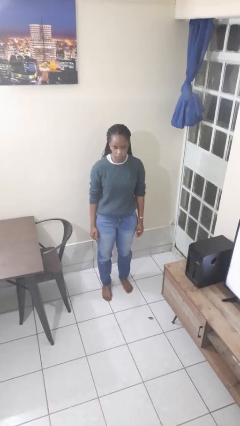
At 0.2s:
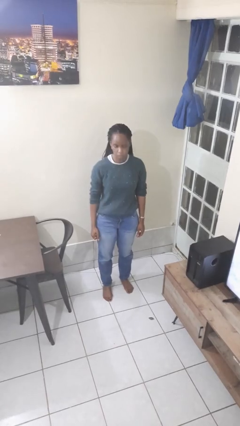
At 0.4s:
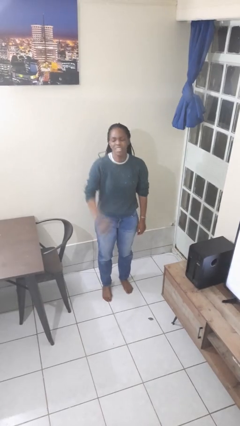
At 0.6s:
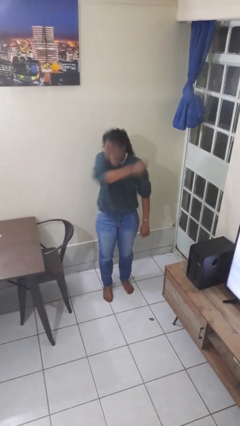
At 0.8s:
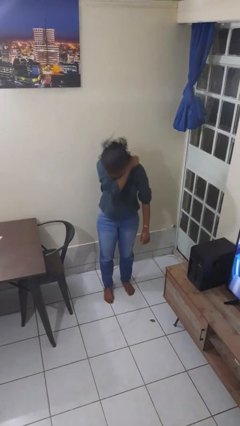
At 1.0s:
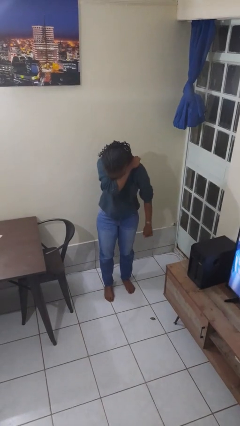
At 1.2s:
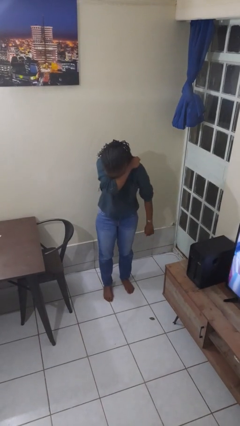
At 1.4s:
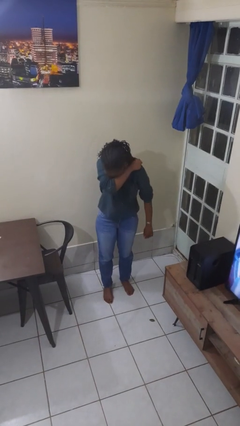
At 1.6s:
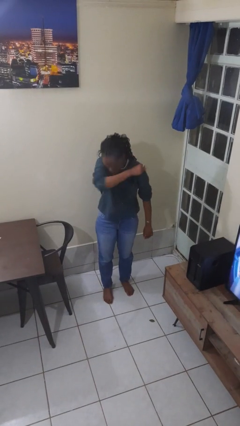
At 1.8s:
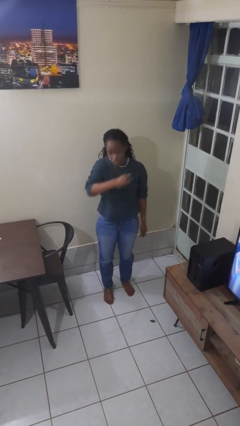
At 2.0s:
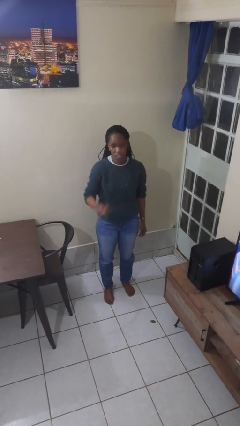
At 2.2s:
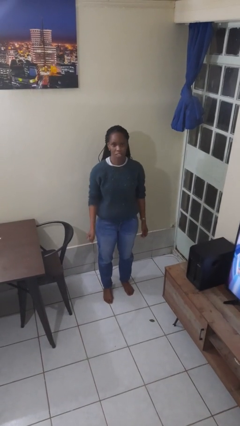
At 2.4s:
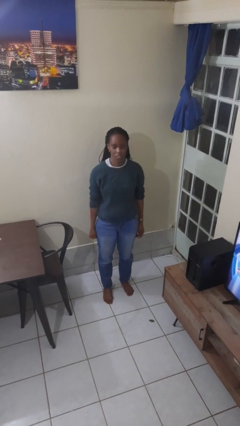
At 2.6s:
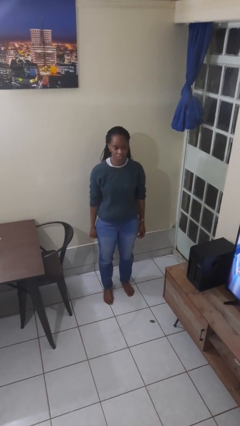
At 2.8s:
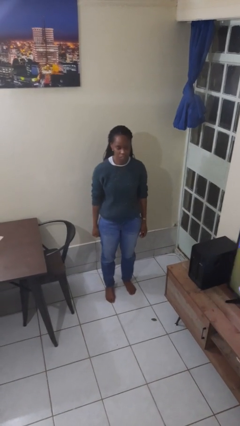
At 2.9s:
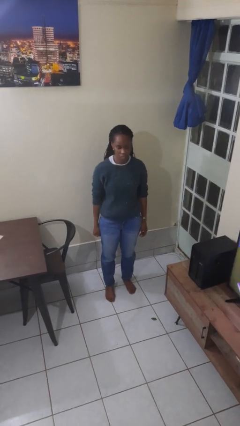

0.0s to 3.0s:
person sneezes into arm

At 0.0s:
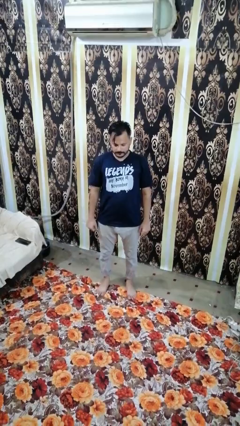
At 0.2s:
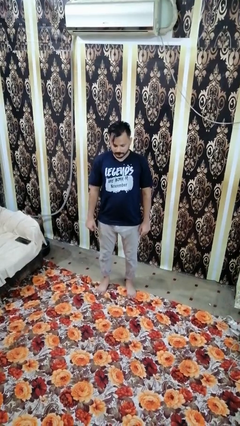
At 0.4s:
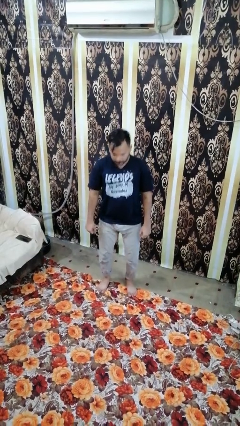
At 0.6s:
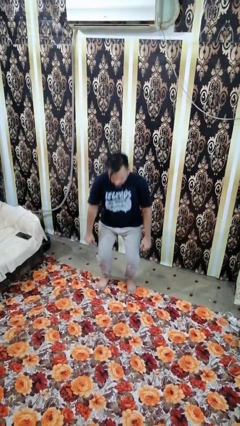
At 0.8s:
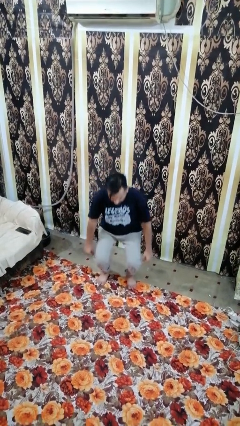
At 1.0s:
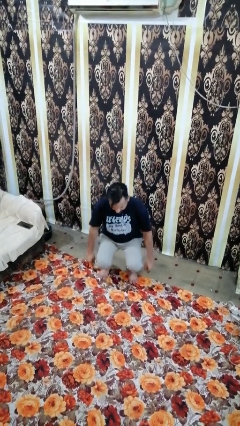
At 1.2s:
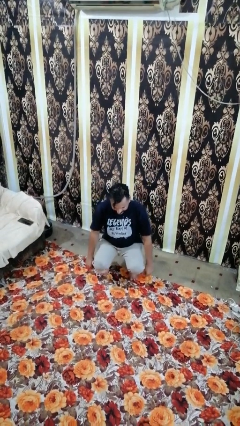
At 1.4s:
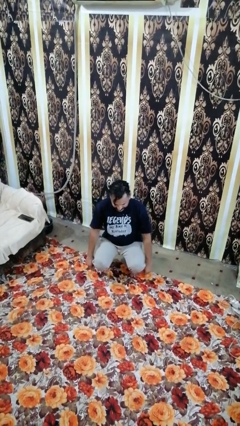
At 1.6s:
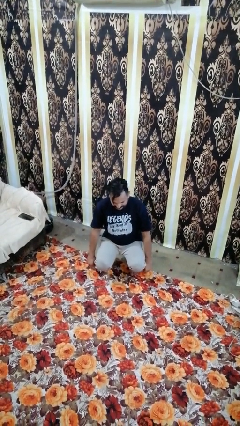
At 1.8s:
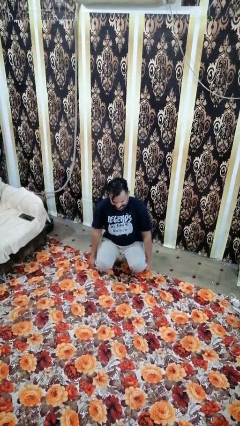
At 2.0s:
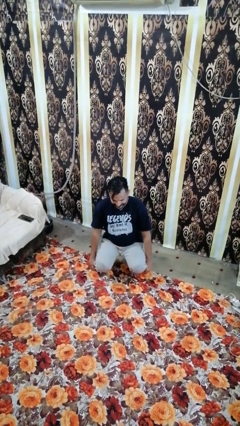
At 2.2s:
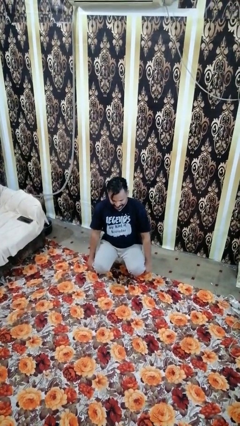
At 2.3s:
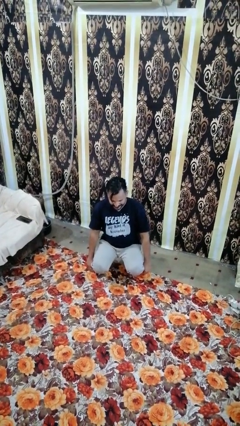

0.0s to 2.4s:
person squats

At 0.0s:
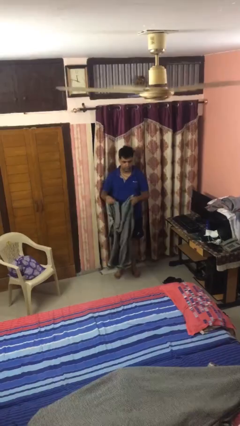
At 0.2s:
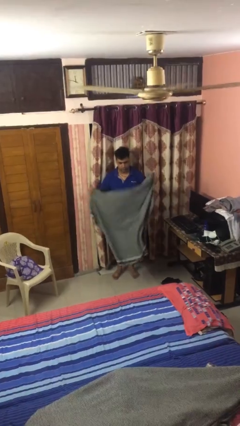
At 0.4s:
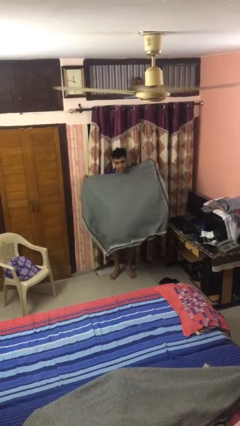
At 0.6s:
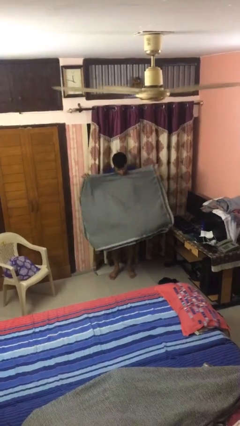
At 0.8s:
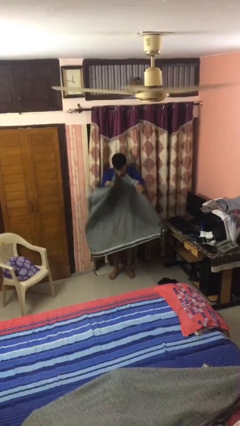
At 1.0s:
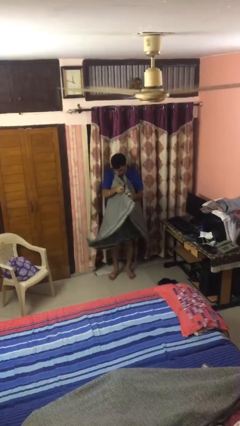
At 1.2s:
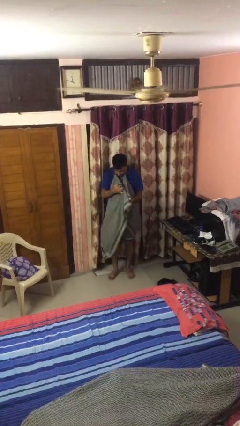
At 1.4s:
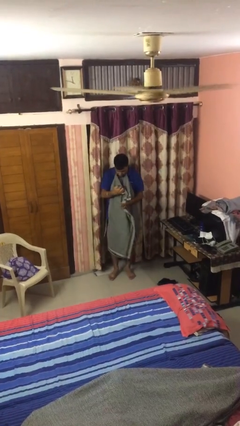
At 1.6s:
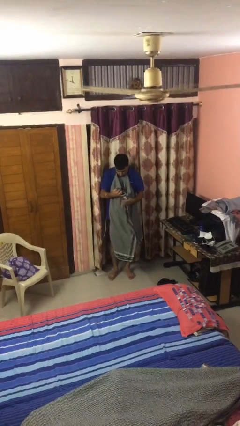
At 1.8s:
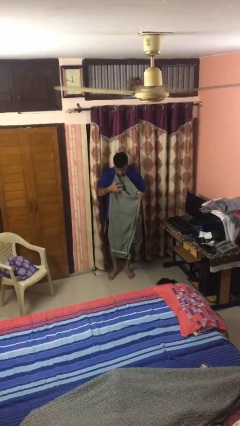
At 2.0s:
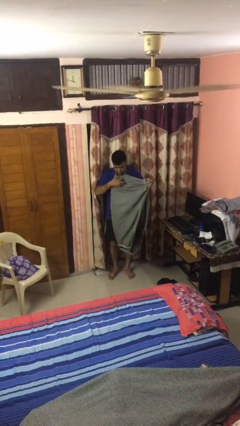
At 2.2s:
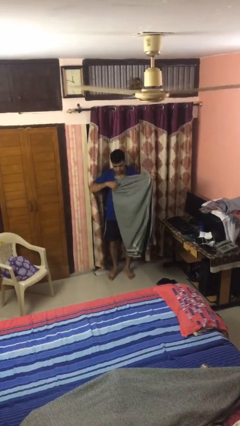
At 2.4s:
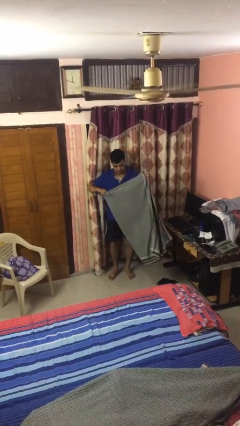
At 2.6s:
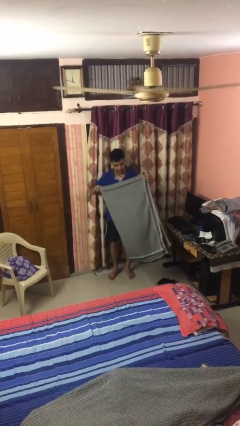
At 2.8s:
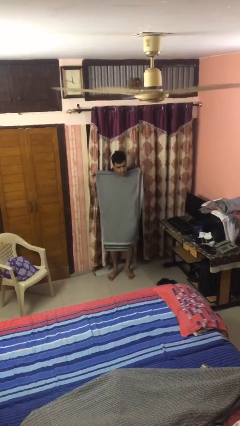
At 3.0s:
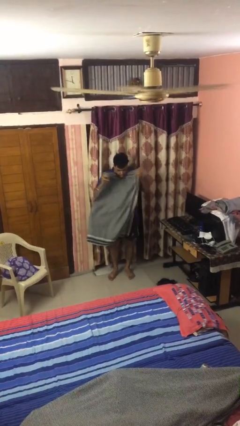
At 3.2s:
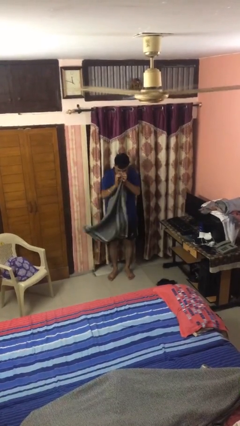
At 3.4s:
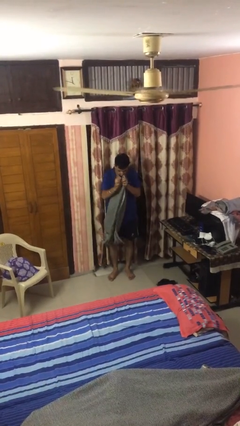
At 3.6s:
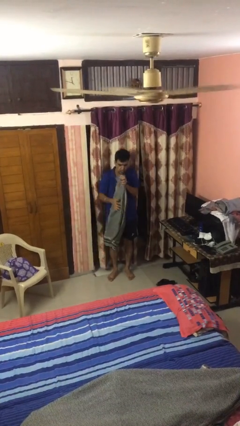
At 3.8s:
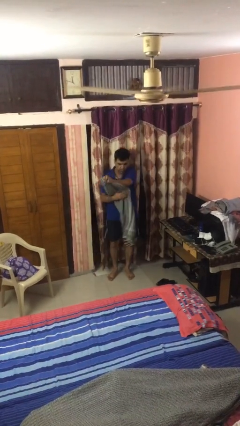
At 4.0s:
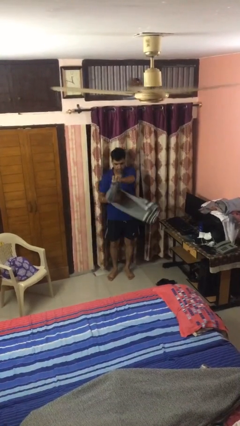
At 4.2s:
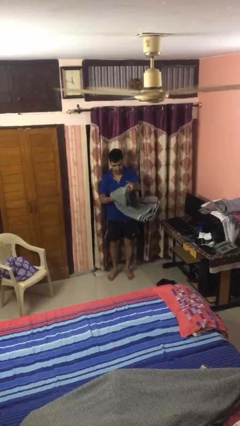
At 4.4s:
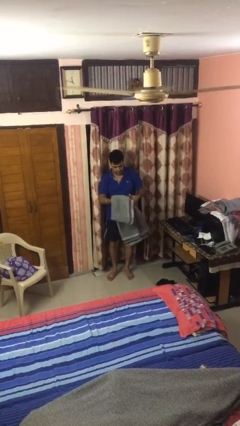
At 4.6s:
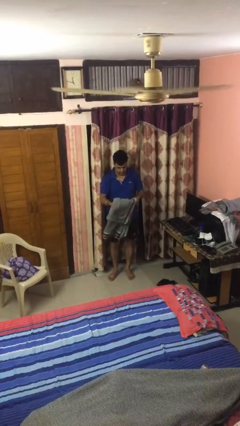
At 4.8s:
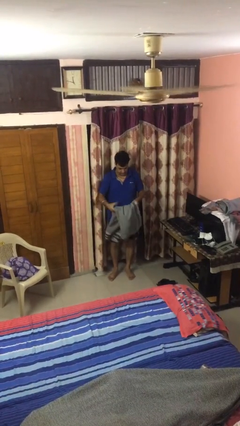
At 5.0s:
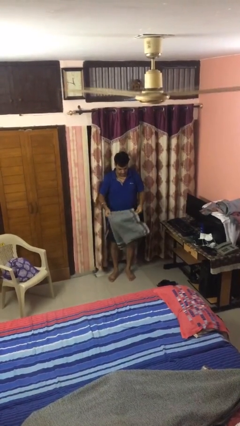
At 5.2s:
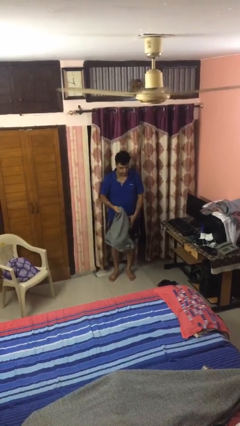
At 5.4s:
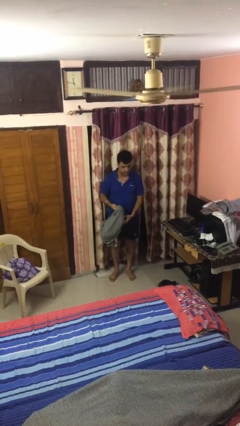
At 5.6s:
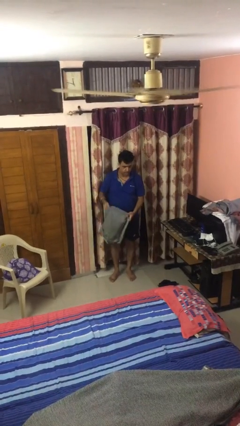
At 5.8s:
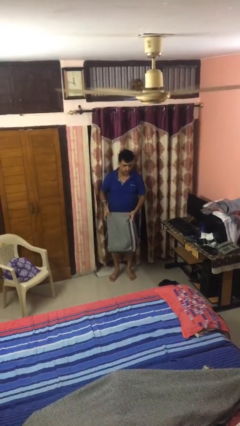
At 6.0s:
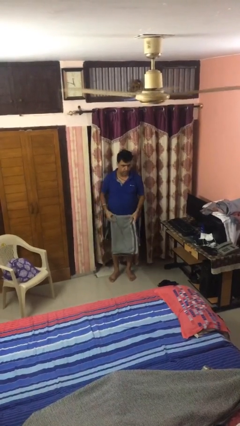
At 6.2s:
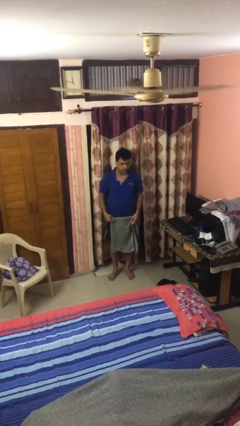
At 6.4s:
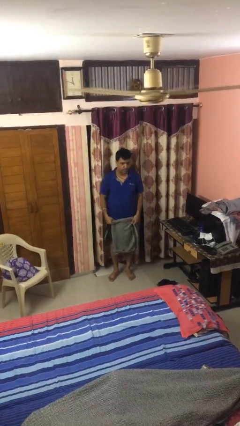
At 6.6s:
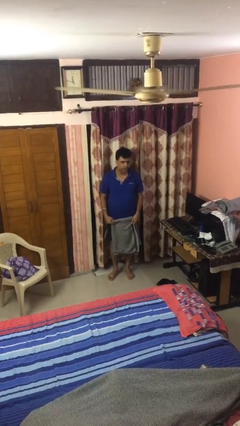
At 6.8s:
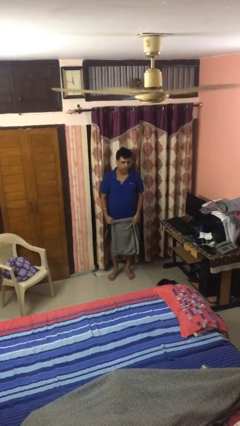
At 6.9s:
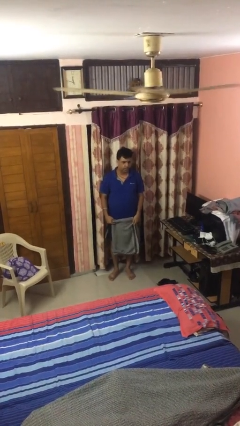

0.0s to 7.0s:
person folds blanket

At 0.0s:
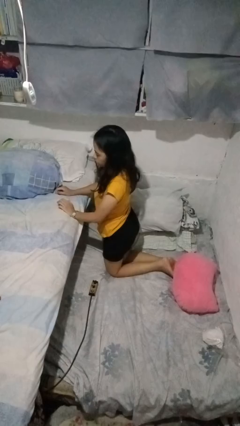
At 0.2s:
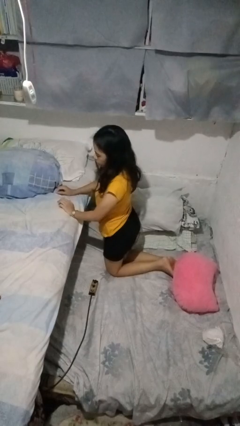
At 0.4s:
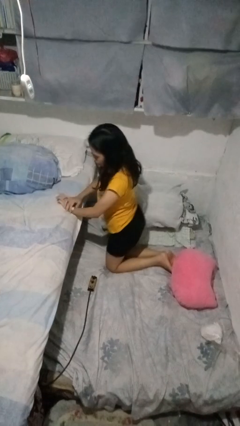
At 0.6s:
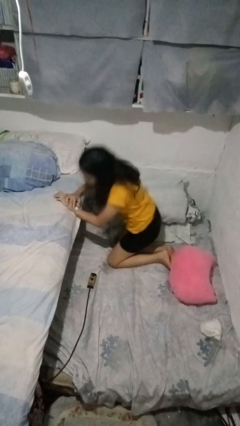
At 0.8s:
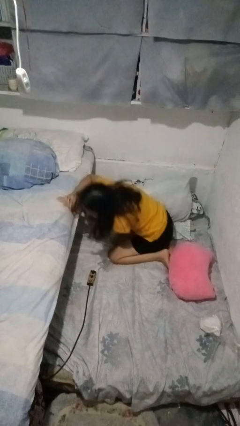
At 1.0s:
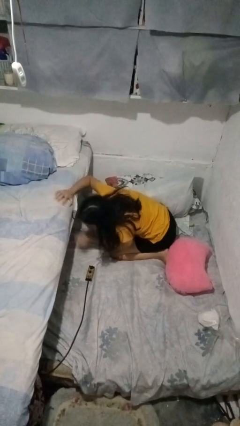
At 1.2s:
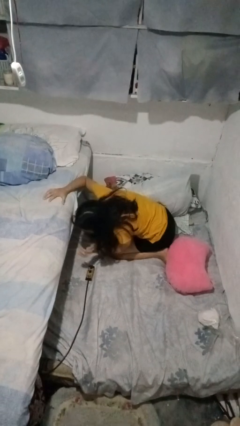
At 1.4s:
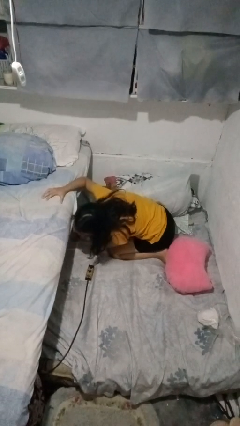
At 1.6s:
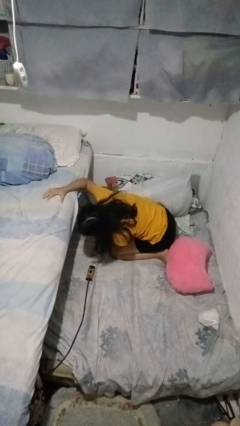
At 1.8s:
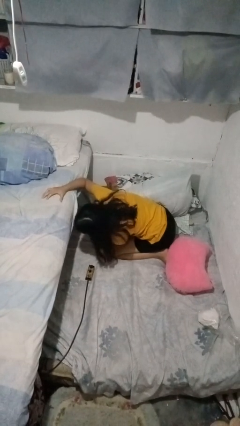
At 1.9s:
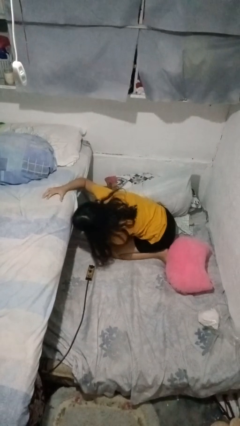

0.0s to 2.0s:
person searches under bed

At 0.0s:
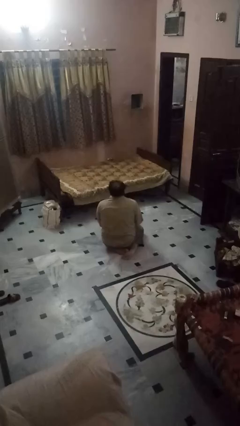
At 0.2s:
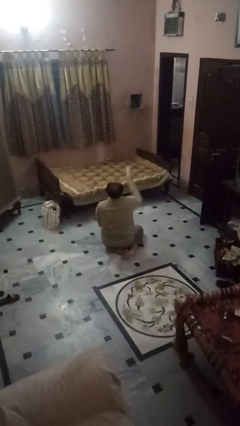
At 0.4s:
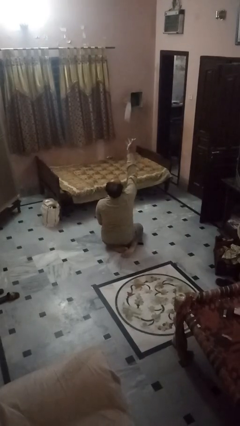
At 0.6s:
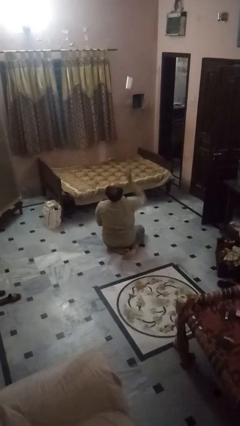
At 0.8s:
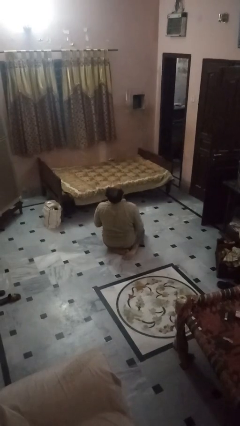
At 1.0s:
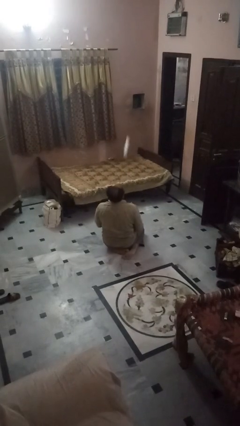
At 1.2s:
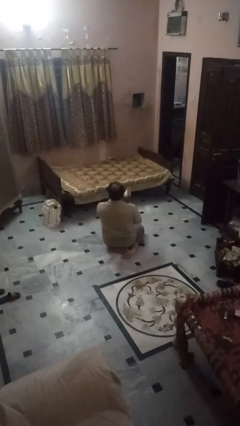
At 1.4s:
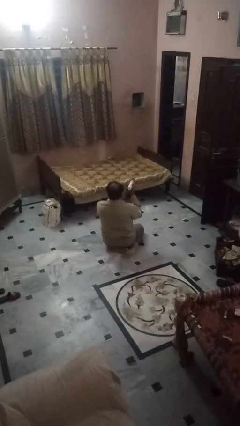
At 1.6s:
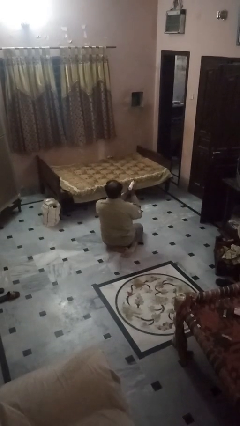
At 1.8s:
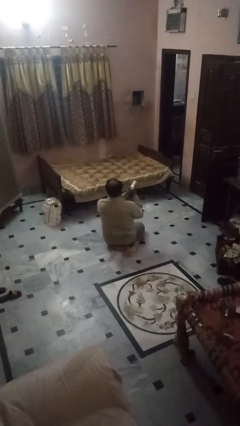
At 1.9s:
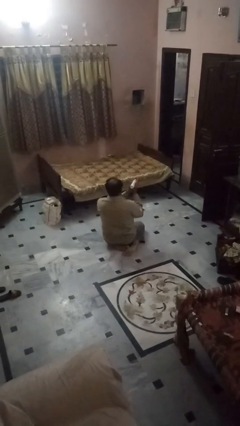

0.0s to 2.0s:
person drops object

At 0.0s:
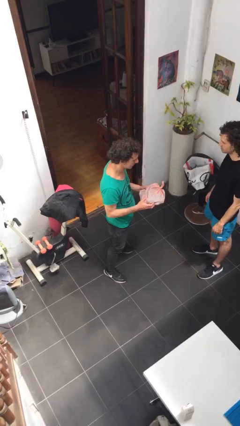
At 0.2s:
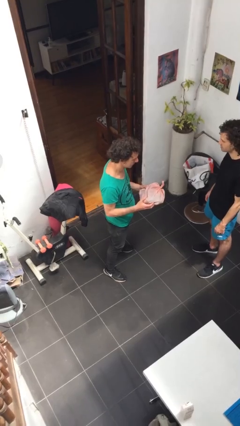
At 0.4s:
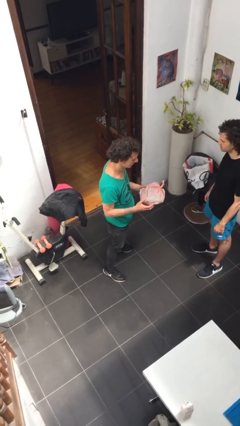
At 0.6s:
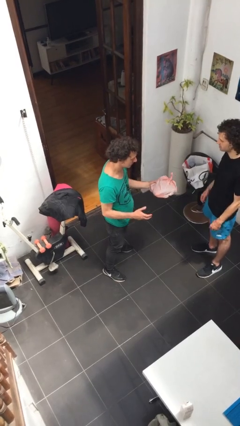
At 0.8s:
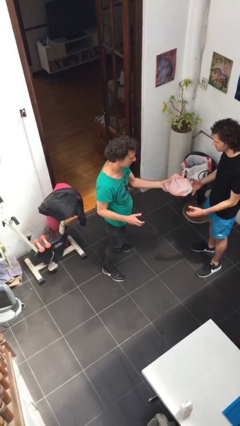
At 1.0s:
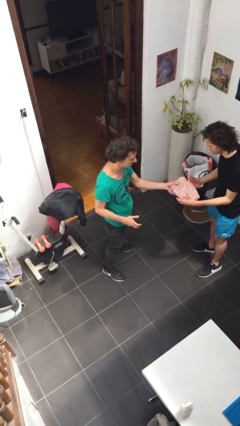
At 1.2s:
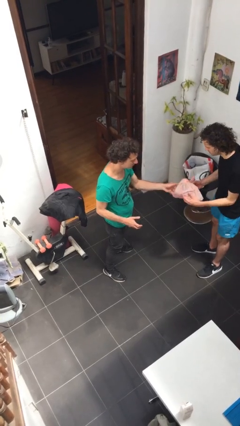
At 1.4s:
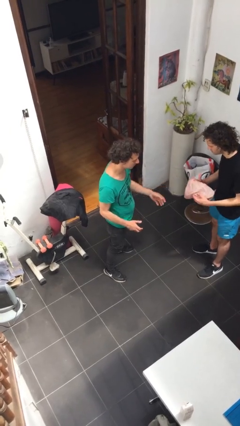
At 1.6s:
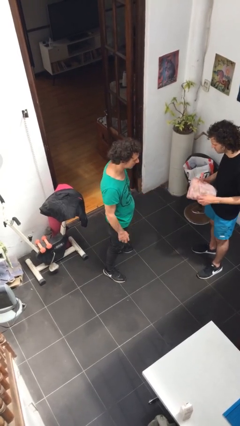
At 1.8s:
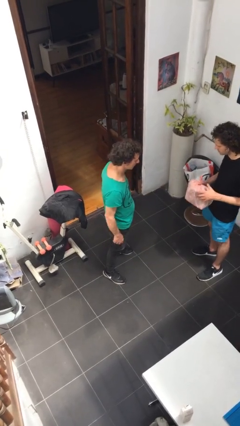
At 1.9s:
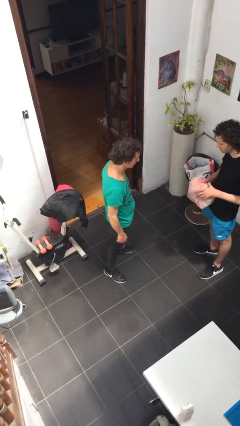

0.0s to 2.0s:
person transfers object to person
